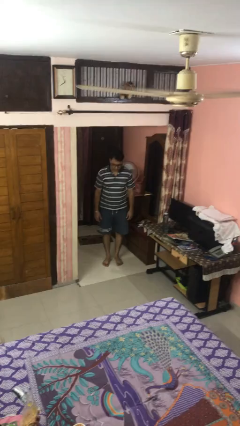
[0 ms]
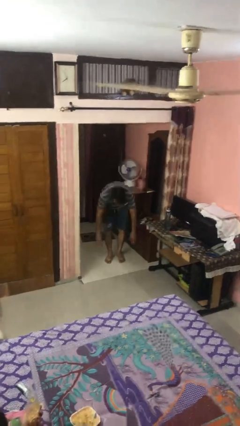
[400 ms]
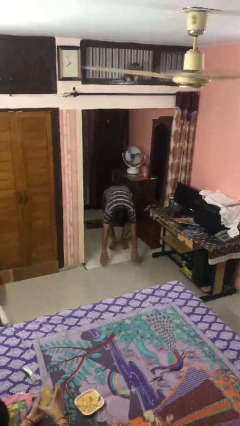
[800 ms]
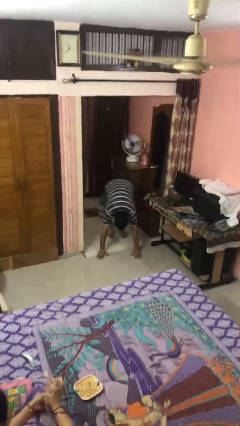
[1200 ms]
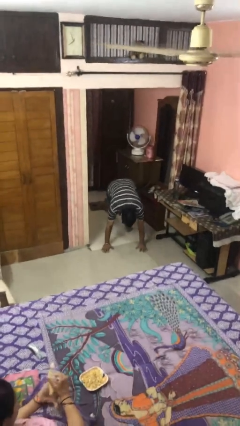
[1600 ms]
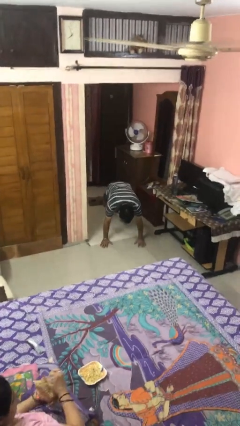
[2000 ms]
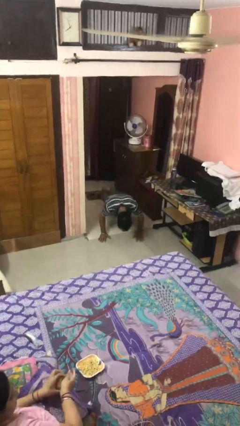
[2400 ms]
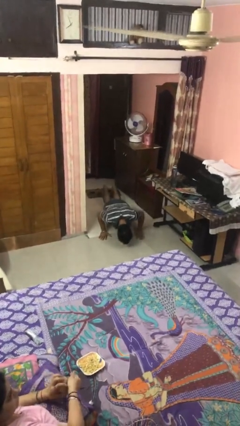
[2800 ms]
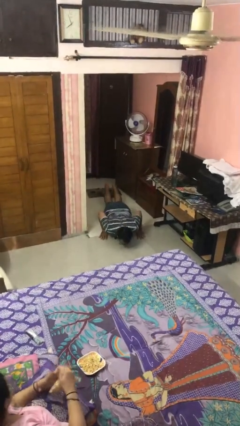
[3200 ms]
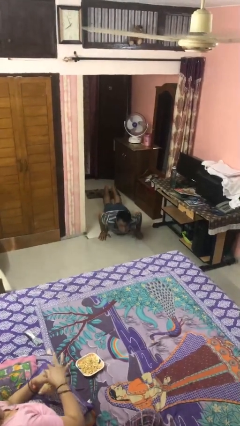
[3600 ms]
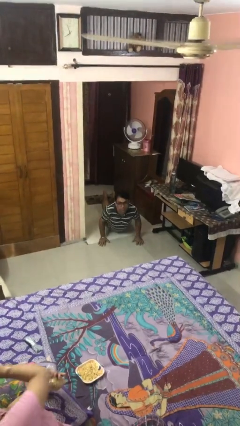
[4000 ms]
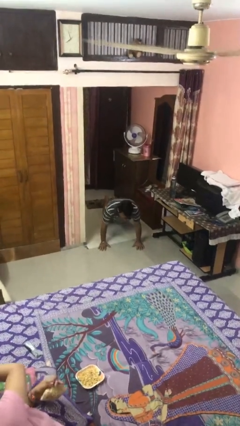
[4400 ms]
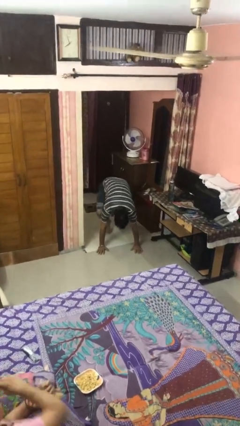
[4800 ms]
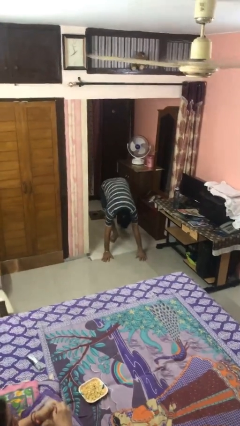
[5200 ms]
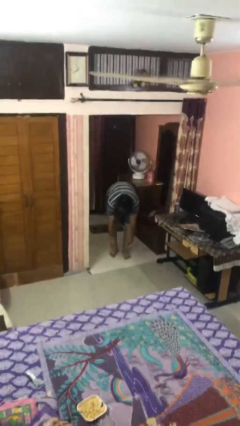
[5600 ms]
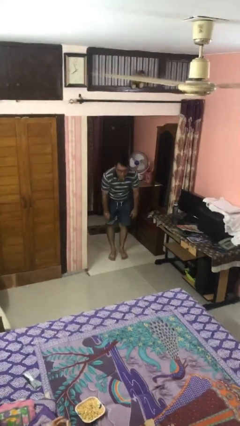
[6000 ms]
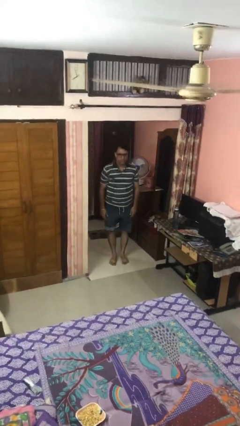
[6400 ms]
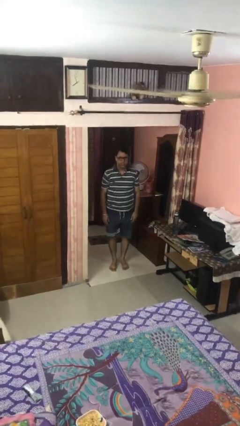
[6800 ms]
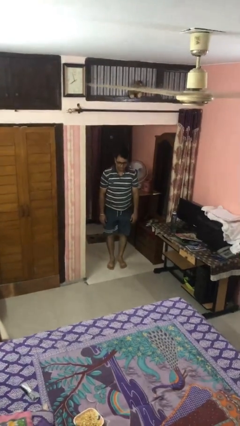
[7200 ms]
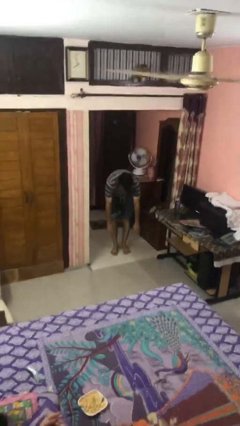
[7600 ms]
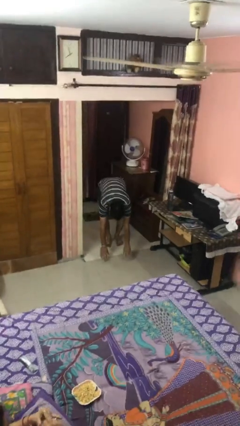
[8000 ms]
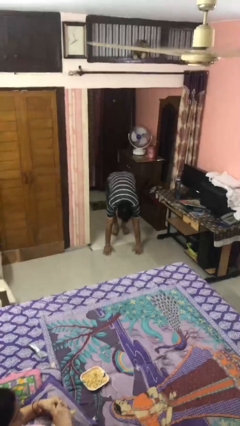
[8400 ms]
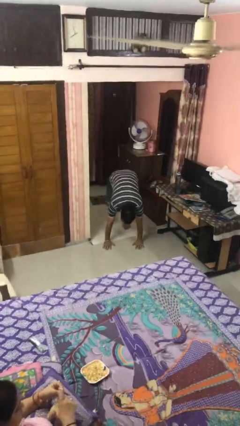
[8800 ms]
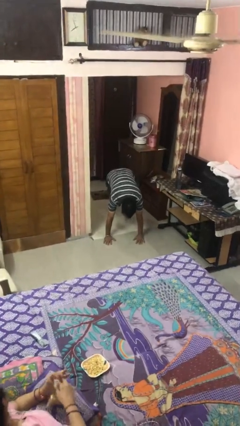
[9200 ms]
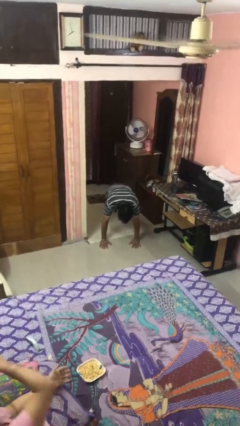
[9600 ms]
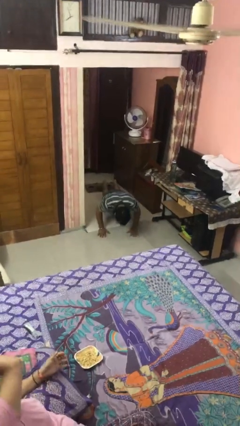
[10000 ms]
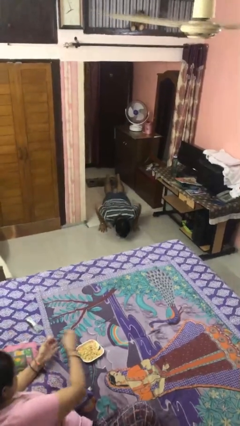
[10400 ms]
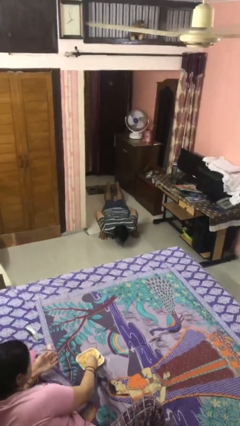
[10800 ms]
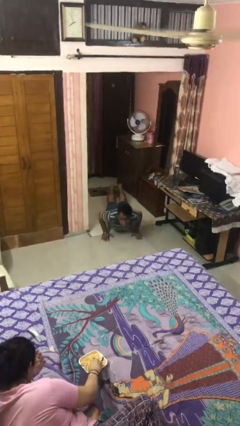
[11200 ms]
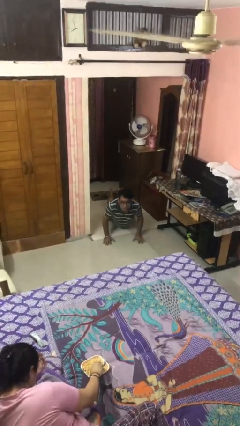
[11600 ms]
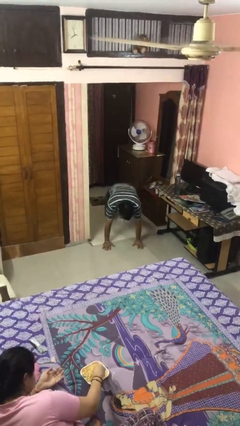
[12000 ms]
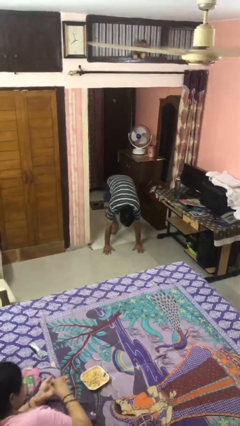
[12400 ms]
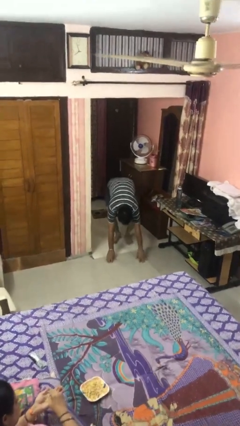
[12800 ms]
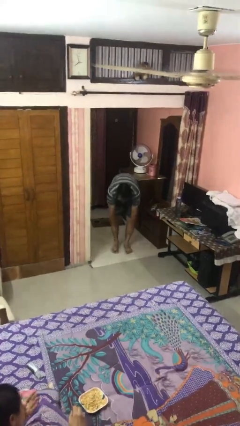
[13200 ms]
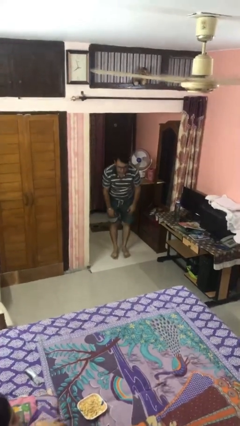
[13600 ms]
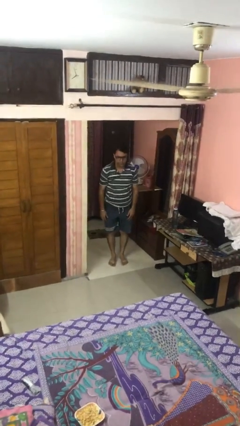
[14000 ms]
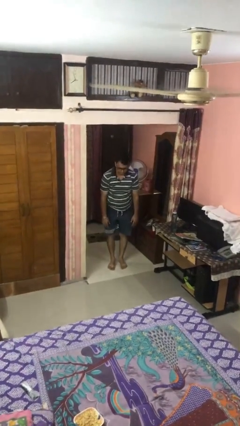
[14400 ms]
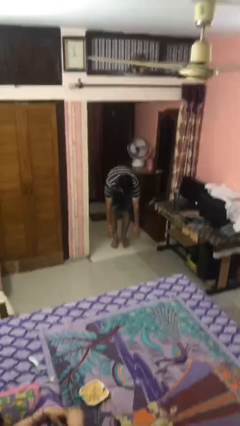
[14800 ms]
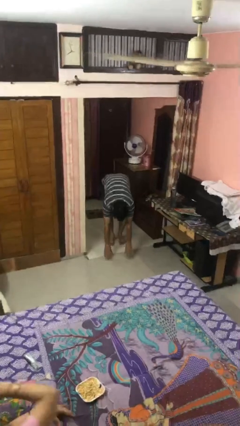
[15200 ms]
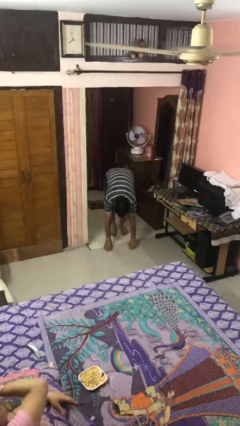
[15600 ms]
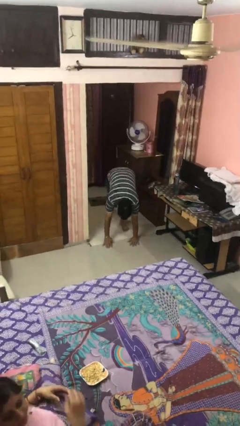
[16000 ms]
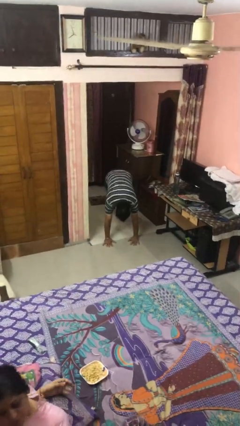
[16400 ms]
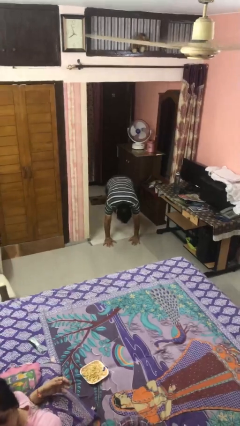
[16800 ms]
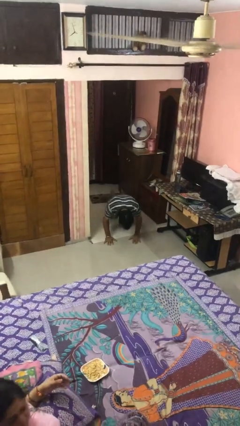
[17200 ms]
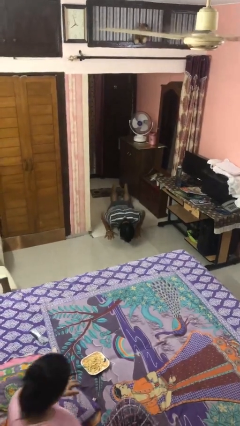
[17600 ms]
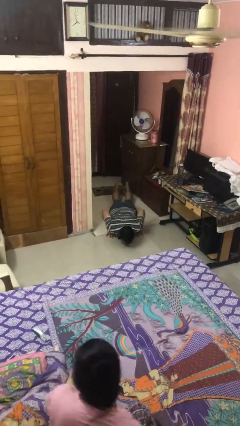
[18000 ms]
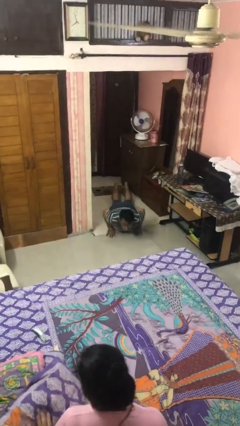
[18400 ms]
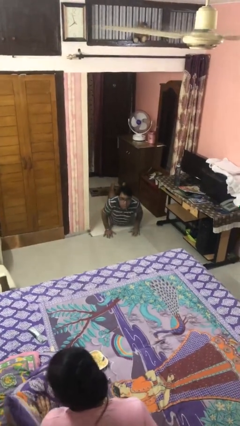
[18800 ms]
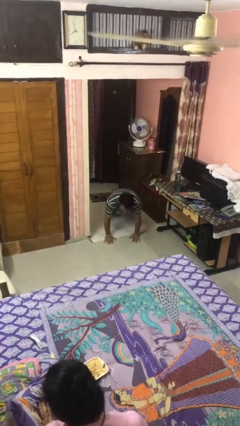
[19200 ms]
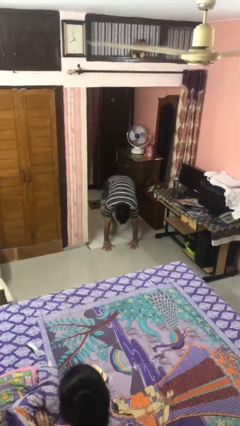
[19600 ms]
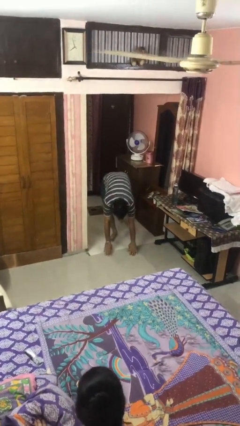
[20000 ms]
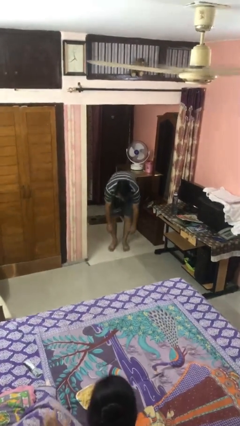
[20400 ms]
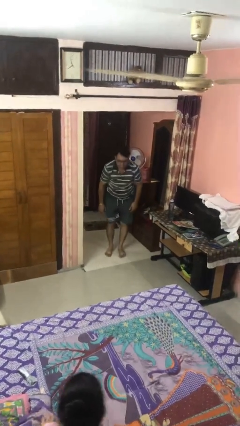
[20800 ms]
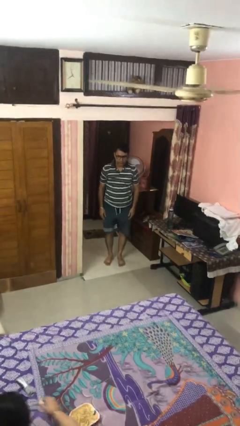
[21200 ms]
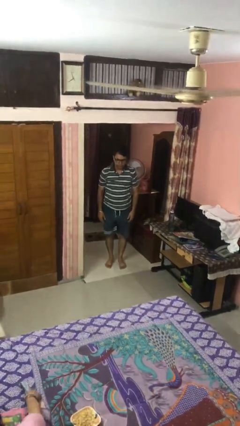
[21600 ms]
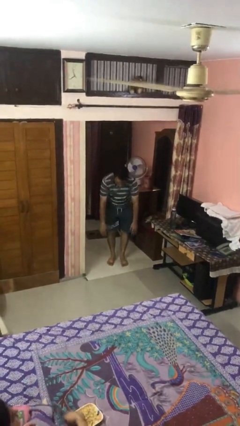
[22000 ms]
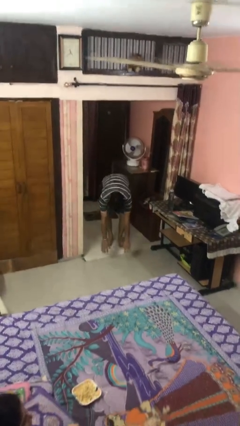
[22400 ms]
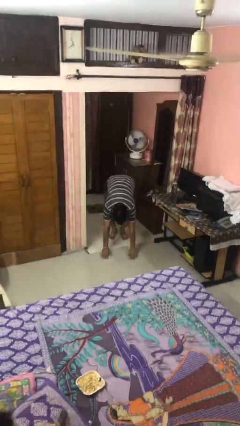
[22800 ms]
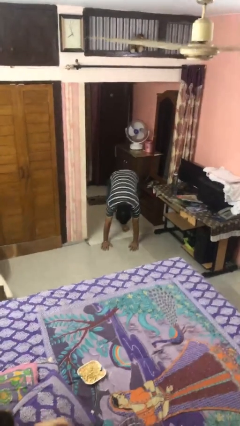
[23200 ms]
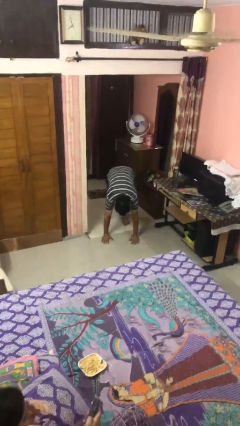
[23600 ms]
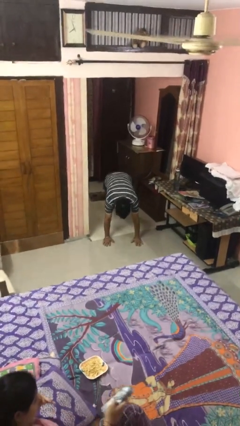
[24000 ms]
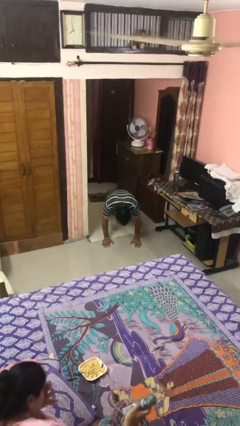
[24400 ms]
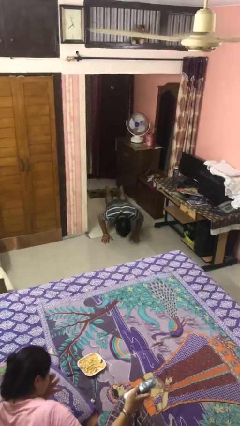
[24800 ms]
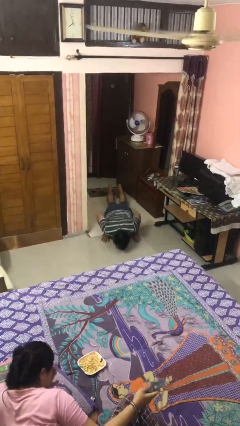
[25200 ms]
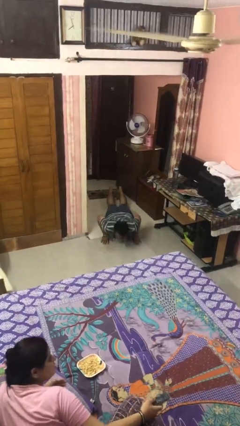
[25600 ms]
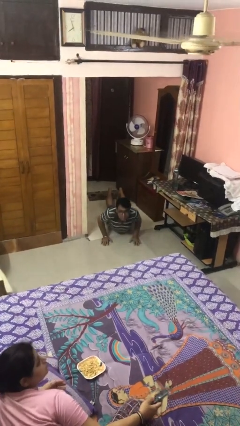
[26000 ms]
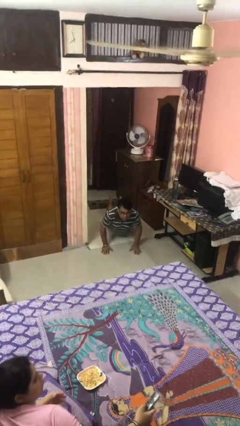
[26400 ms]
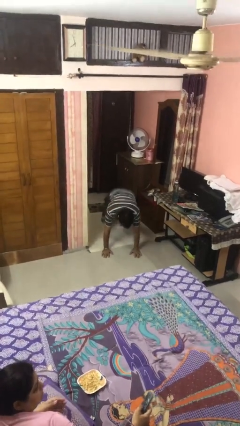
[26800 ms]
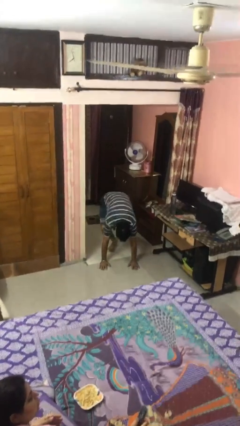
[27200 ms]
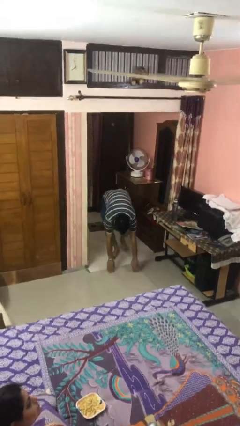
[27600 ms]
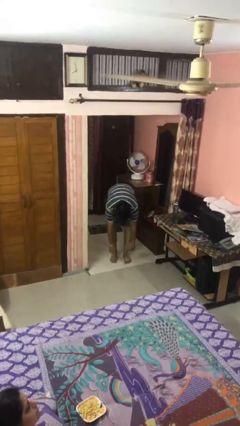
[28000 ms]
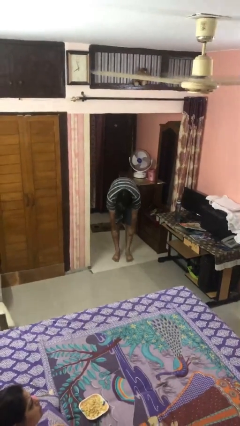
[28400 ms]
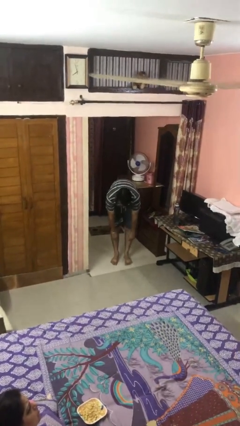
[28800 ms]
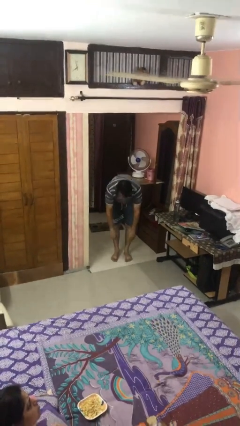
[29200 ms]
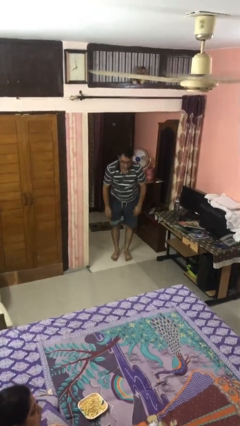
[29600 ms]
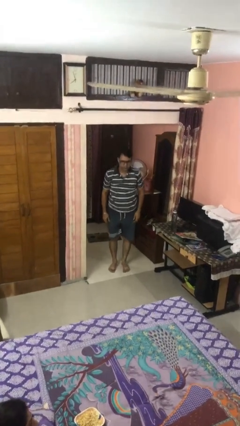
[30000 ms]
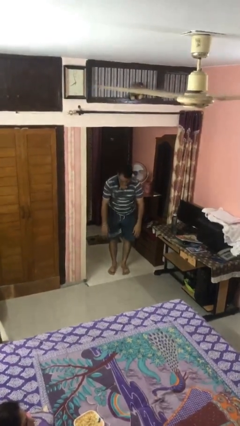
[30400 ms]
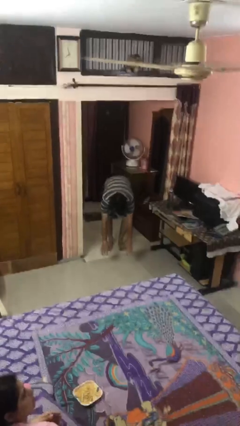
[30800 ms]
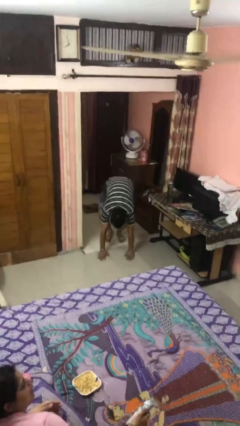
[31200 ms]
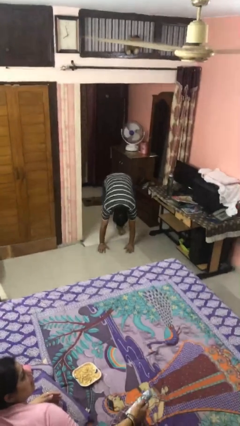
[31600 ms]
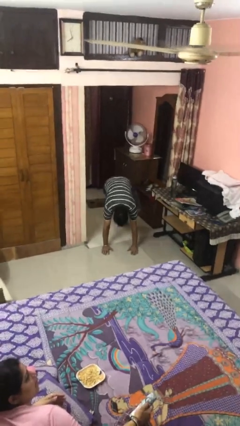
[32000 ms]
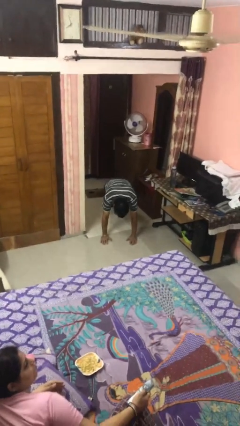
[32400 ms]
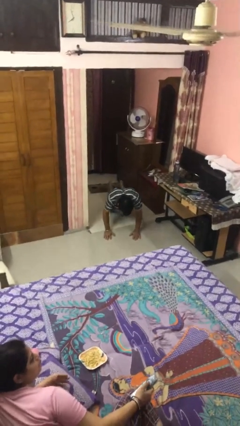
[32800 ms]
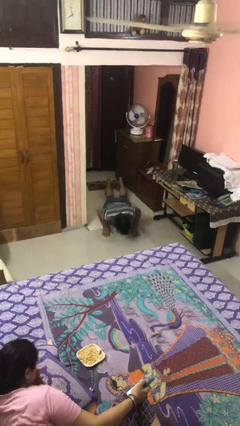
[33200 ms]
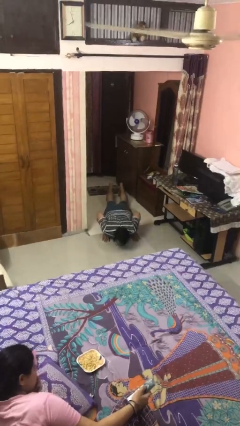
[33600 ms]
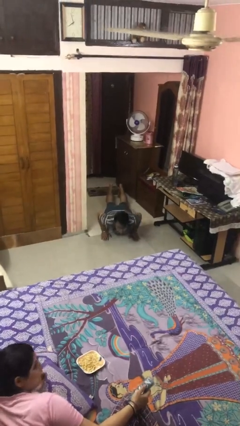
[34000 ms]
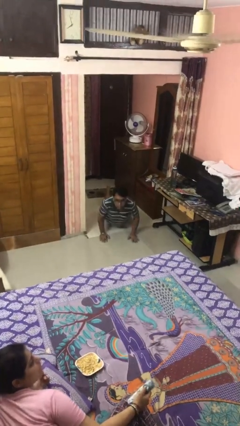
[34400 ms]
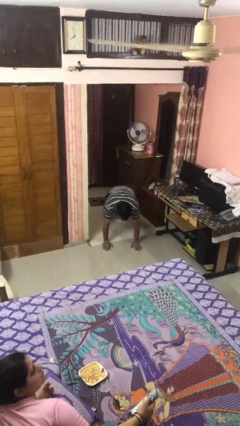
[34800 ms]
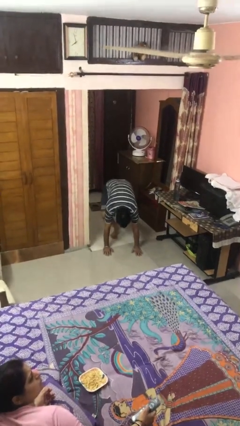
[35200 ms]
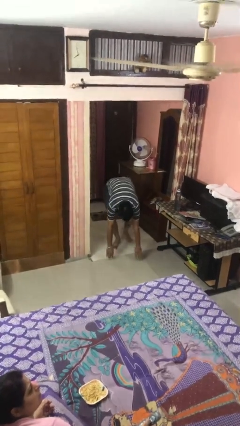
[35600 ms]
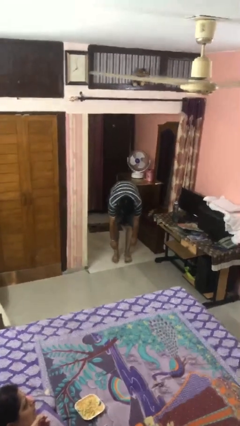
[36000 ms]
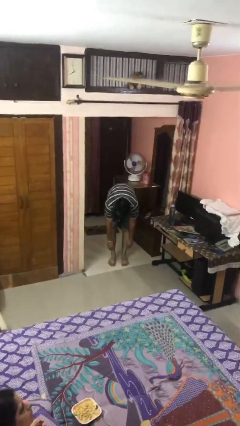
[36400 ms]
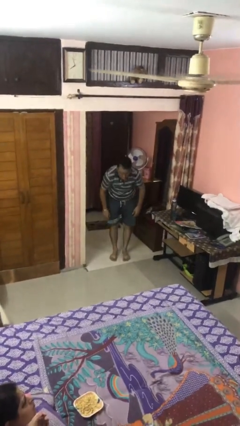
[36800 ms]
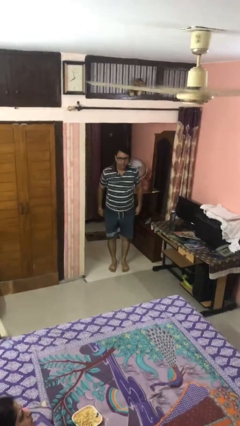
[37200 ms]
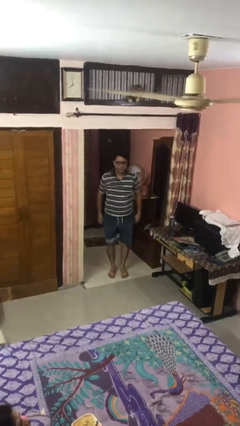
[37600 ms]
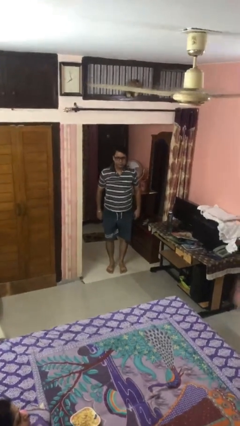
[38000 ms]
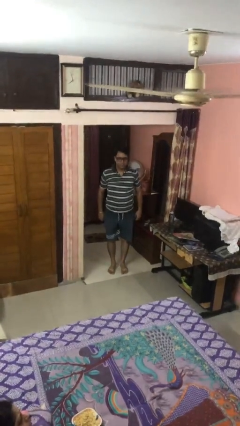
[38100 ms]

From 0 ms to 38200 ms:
person exercises with pushup
